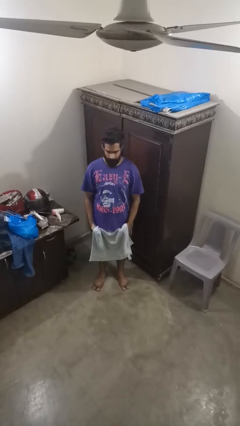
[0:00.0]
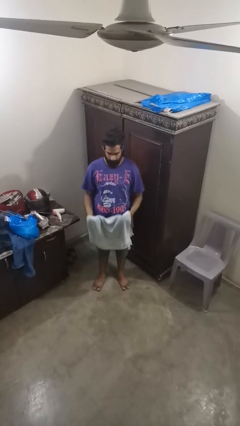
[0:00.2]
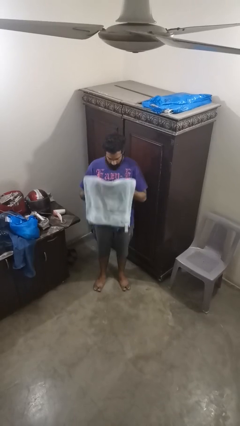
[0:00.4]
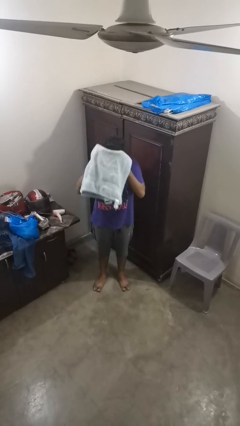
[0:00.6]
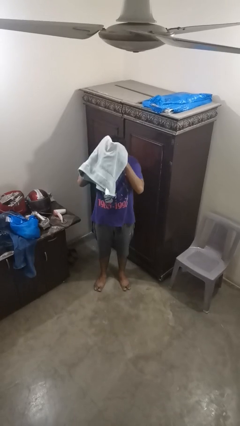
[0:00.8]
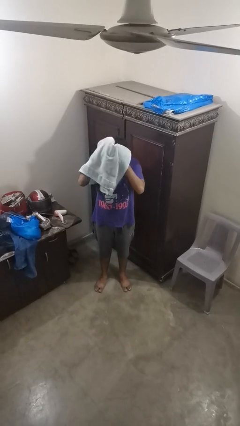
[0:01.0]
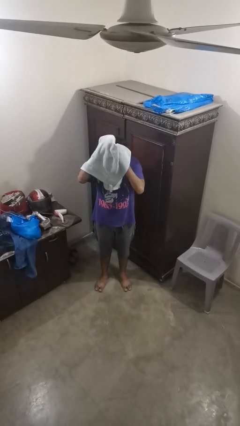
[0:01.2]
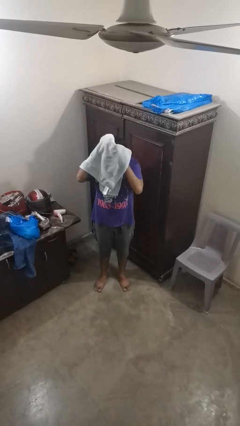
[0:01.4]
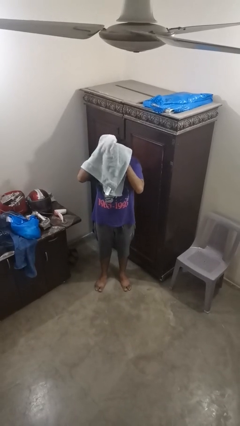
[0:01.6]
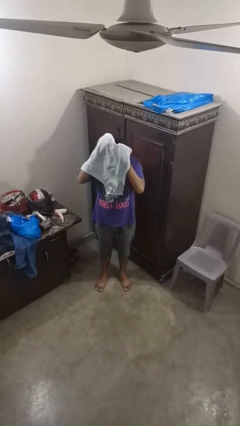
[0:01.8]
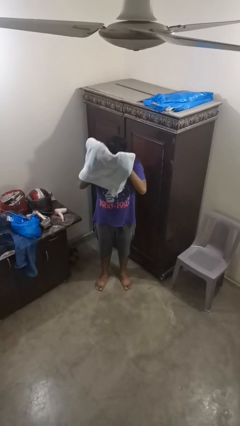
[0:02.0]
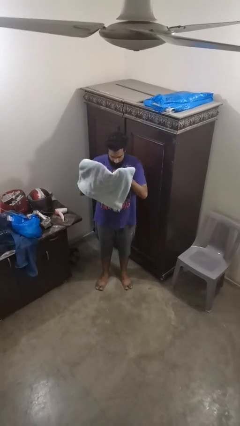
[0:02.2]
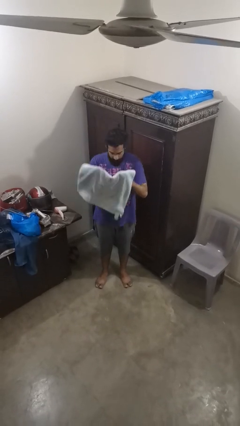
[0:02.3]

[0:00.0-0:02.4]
person dries hair with towel

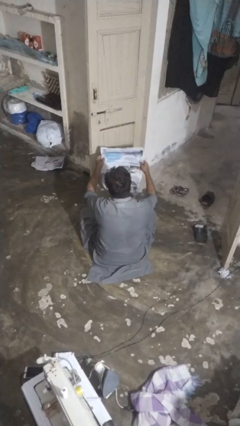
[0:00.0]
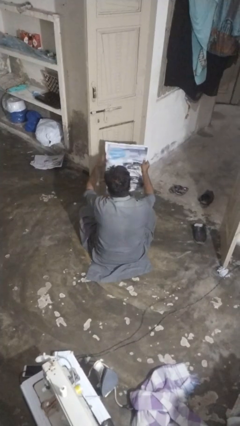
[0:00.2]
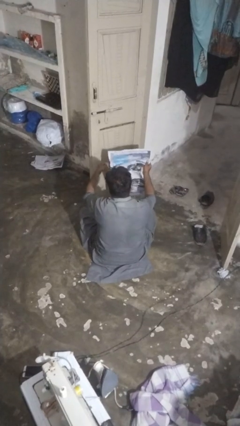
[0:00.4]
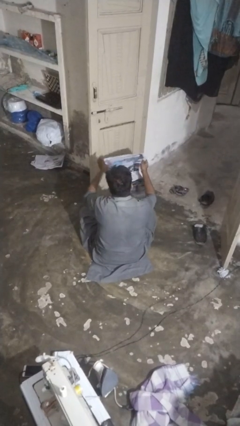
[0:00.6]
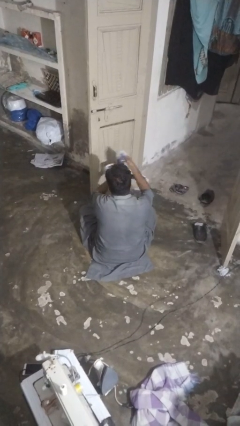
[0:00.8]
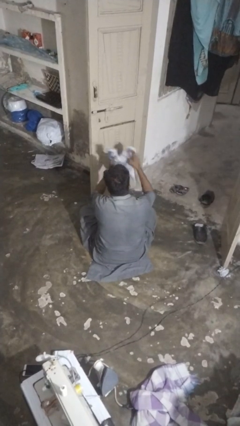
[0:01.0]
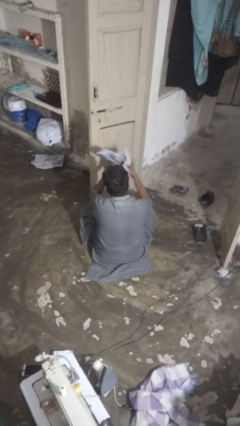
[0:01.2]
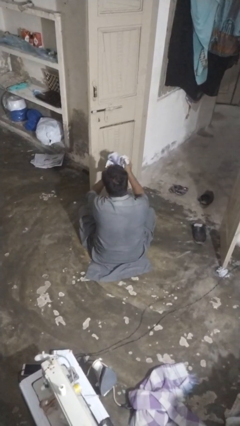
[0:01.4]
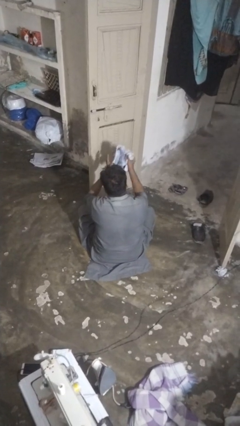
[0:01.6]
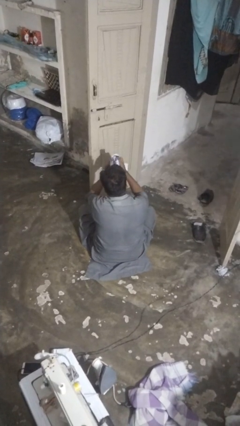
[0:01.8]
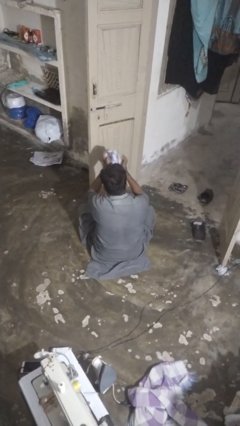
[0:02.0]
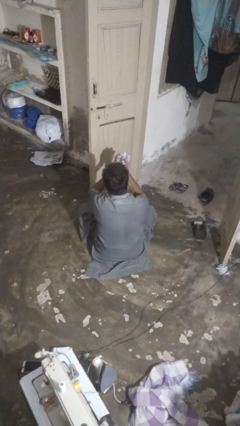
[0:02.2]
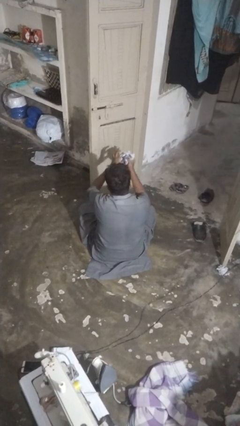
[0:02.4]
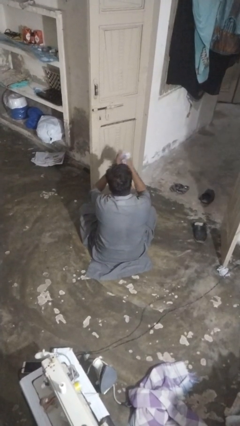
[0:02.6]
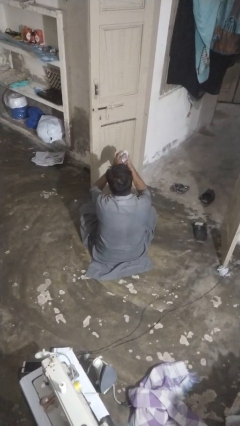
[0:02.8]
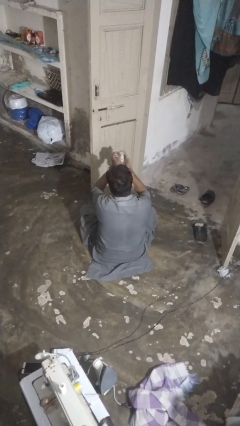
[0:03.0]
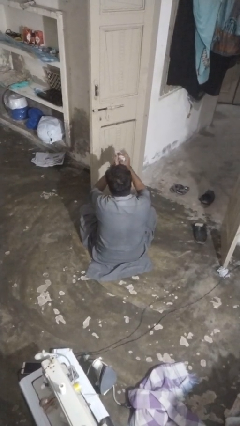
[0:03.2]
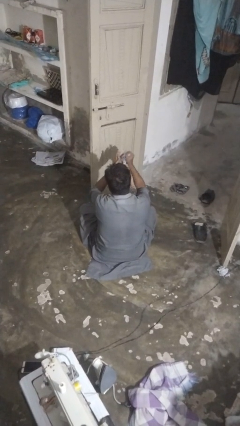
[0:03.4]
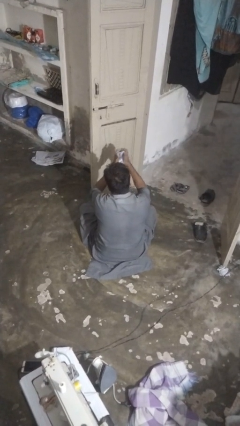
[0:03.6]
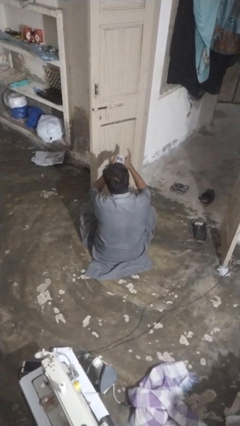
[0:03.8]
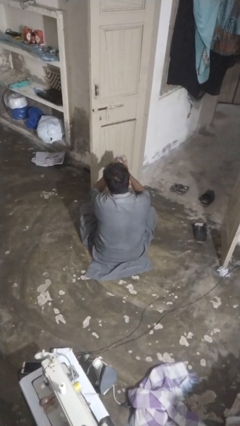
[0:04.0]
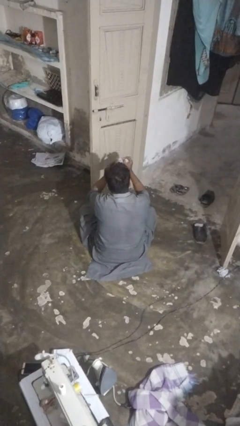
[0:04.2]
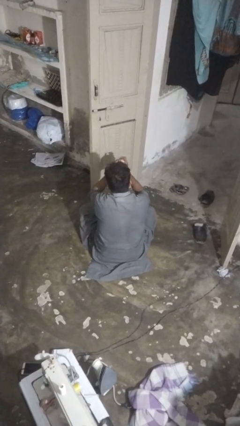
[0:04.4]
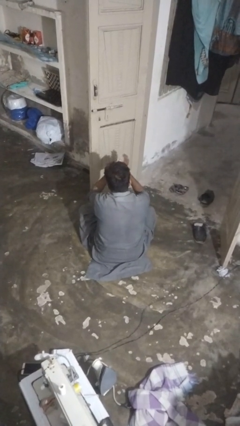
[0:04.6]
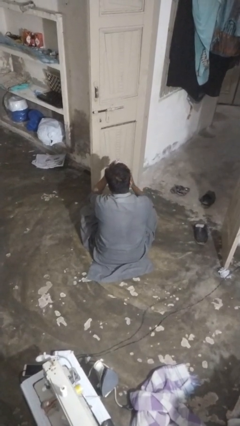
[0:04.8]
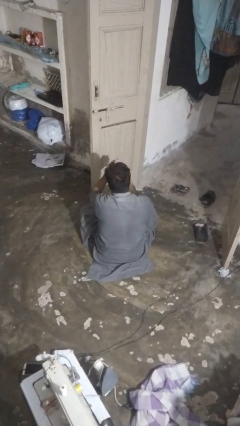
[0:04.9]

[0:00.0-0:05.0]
person crumples paper

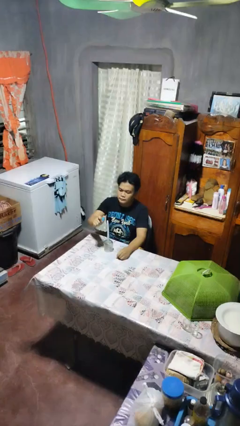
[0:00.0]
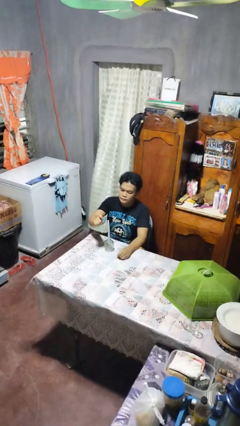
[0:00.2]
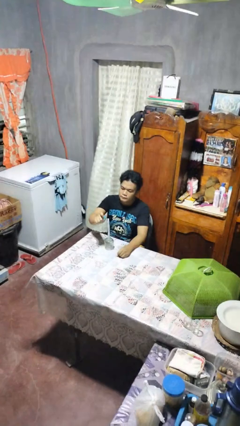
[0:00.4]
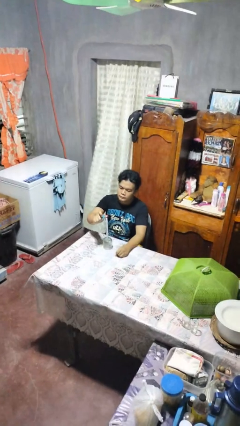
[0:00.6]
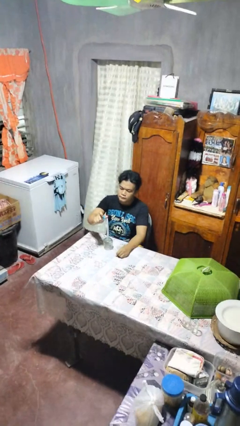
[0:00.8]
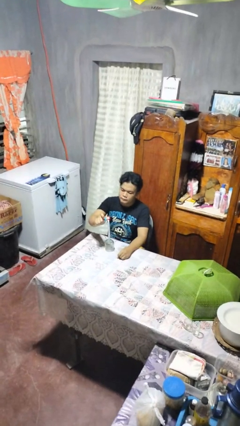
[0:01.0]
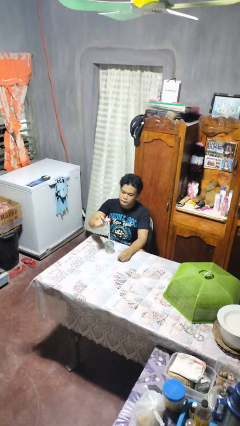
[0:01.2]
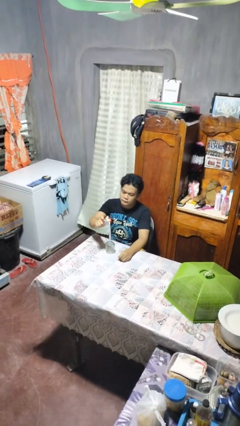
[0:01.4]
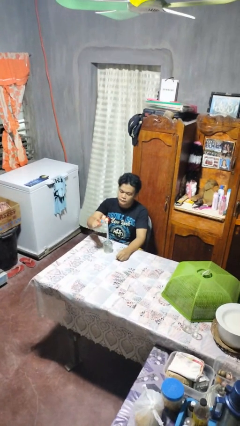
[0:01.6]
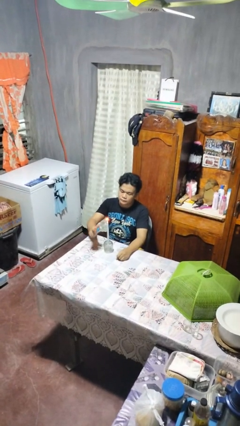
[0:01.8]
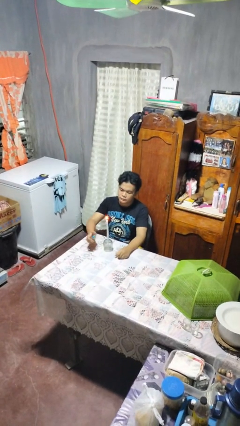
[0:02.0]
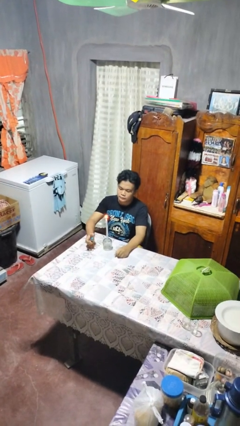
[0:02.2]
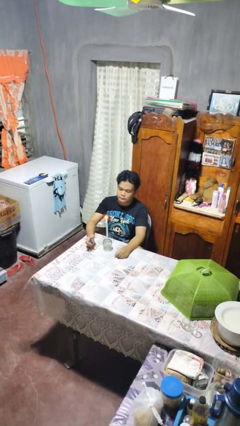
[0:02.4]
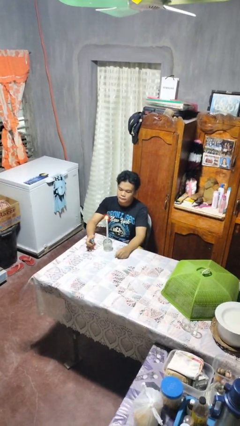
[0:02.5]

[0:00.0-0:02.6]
person lights candle

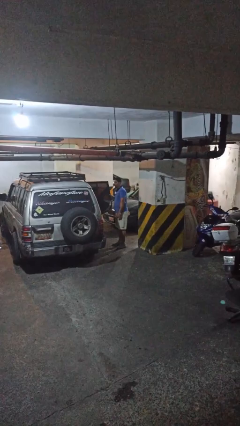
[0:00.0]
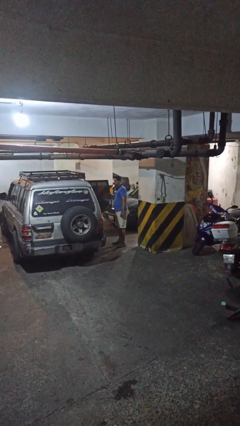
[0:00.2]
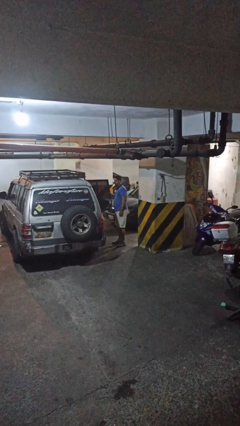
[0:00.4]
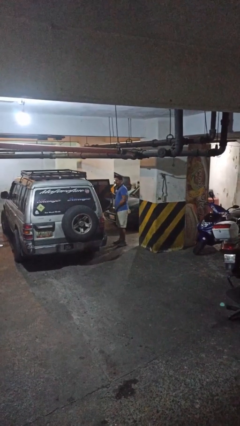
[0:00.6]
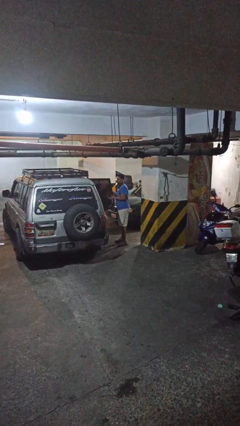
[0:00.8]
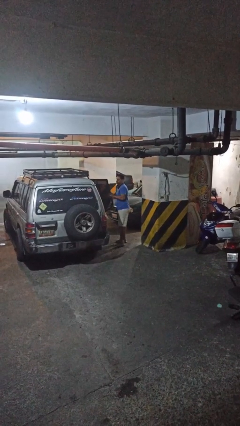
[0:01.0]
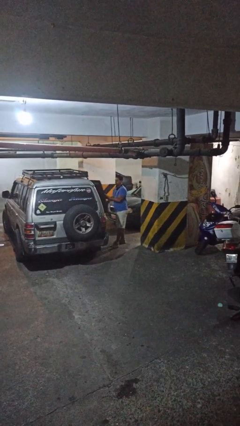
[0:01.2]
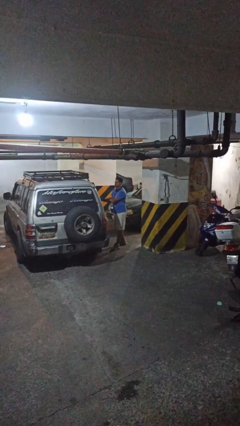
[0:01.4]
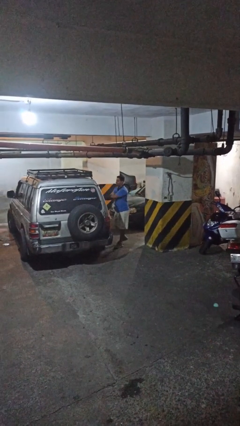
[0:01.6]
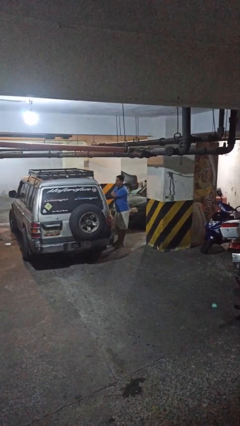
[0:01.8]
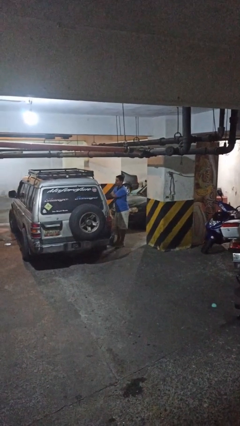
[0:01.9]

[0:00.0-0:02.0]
person closes car door

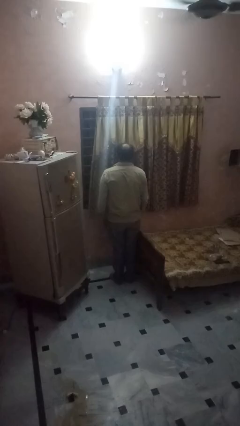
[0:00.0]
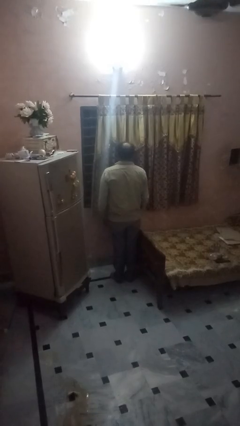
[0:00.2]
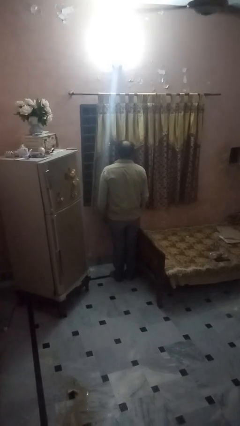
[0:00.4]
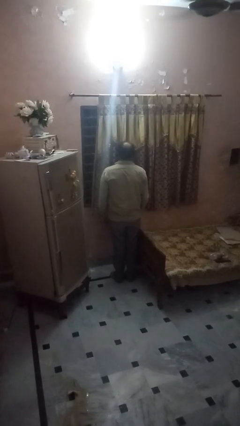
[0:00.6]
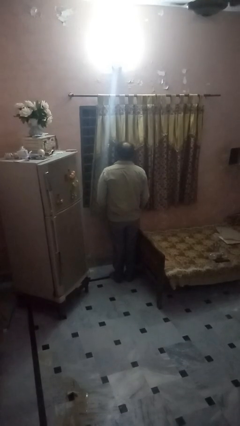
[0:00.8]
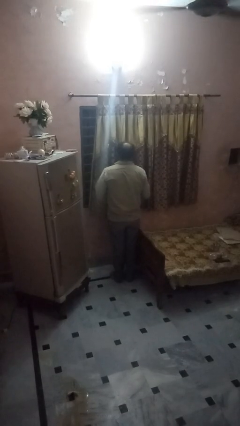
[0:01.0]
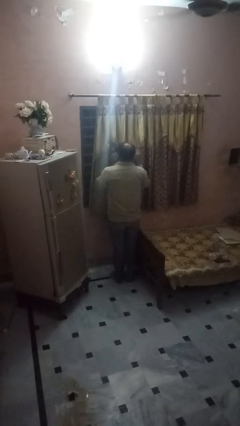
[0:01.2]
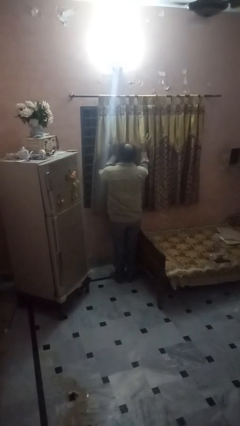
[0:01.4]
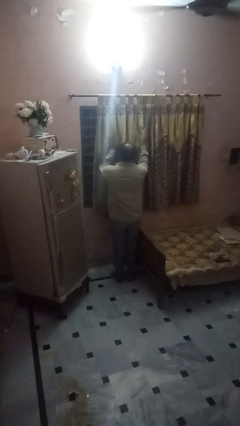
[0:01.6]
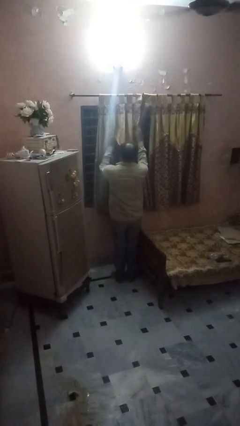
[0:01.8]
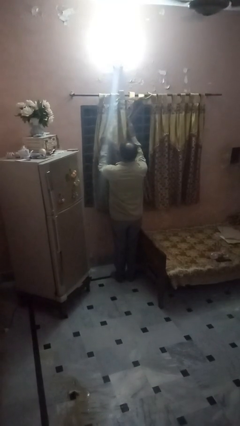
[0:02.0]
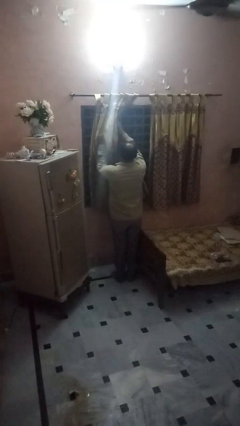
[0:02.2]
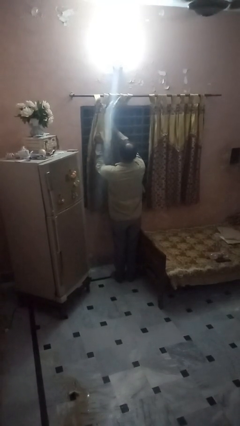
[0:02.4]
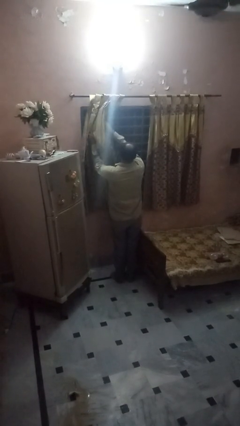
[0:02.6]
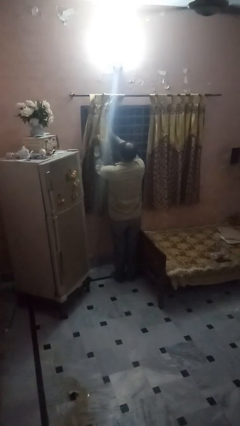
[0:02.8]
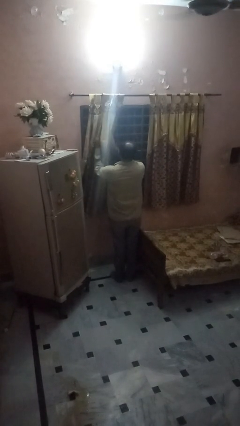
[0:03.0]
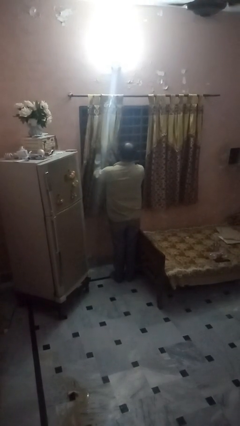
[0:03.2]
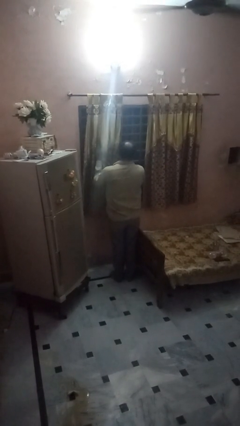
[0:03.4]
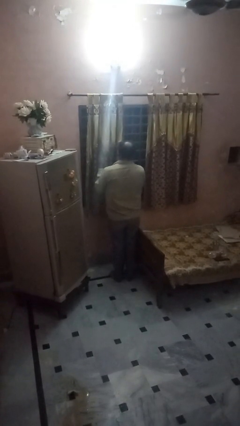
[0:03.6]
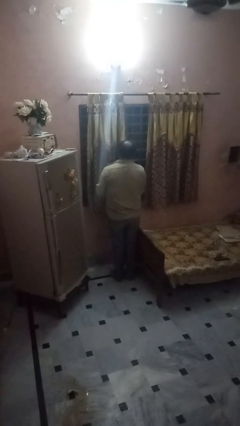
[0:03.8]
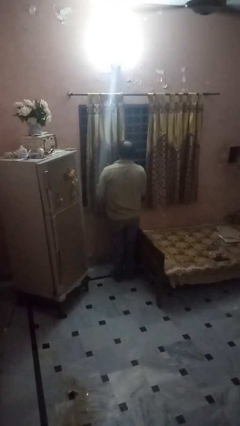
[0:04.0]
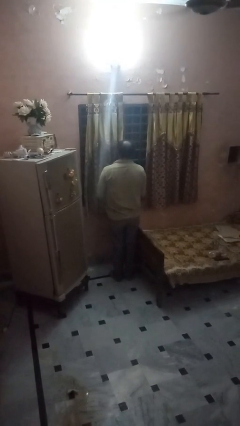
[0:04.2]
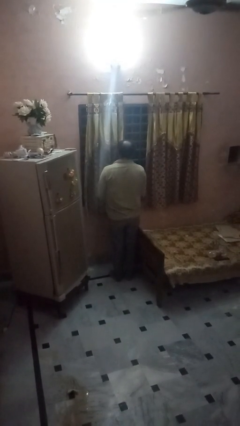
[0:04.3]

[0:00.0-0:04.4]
person opens curtains

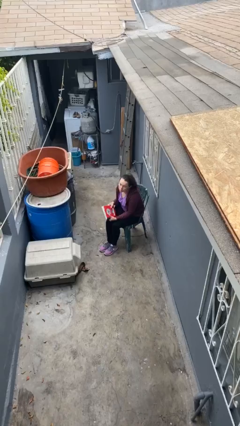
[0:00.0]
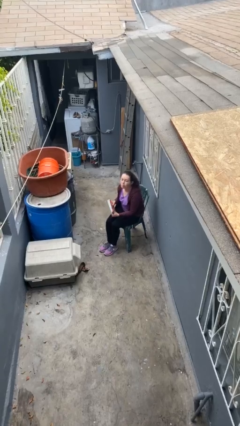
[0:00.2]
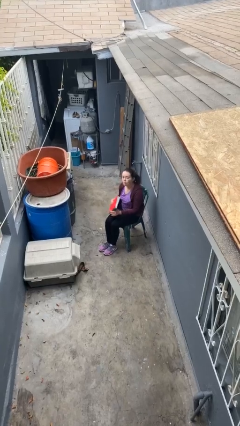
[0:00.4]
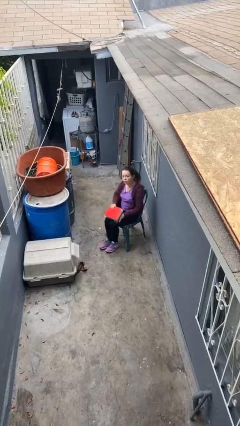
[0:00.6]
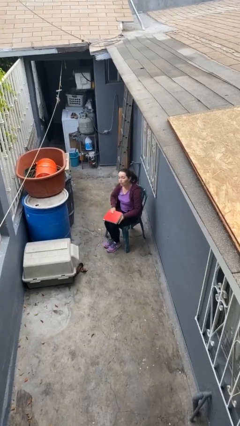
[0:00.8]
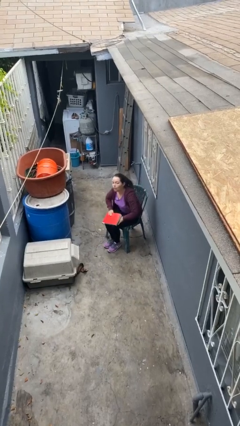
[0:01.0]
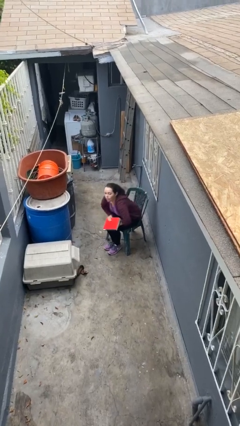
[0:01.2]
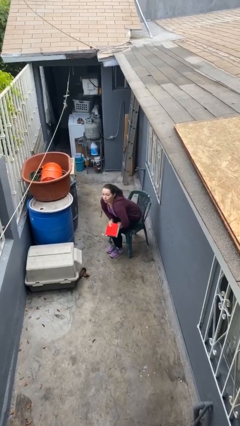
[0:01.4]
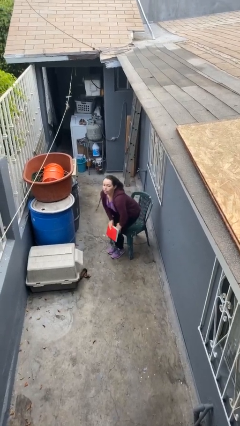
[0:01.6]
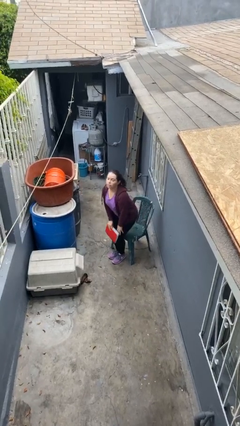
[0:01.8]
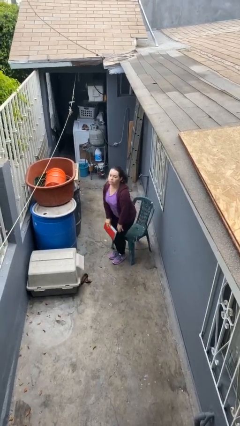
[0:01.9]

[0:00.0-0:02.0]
person stands up
